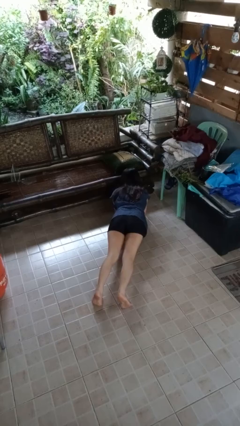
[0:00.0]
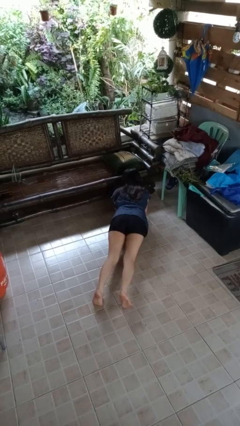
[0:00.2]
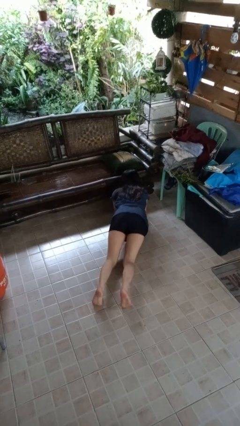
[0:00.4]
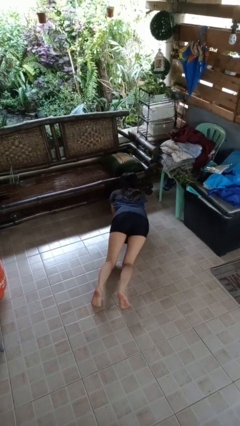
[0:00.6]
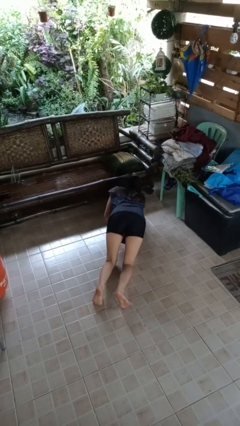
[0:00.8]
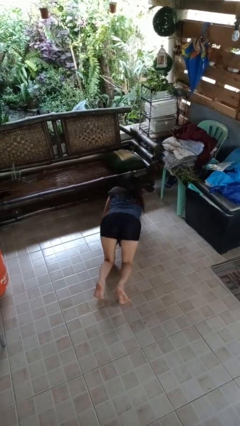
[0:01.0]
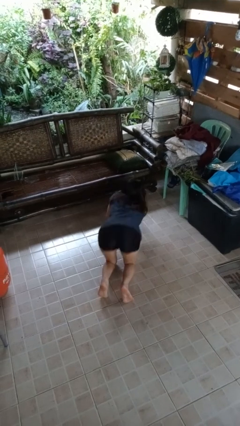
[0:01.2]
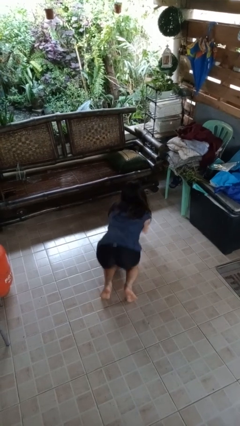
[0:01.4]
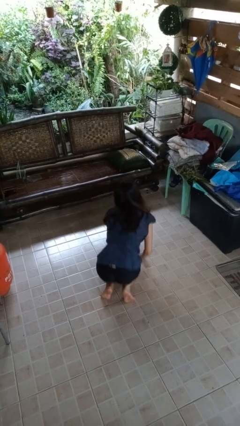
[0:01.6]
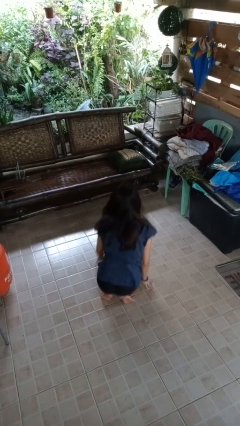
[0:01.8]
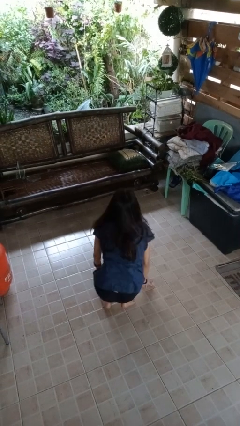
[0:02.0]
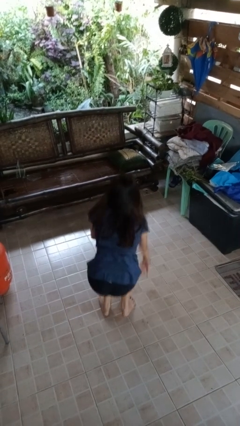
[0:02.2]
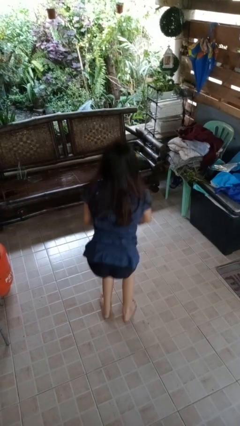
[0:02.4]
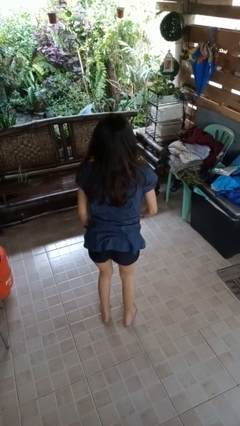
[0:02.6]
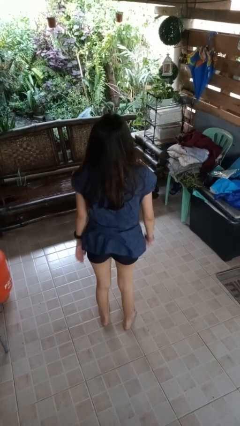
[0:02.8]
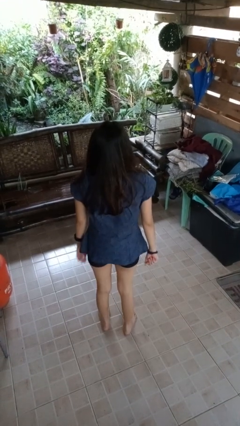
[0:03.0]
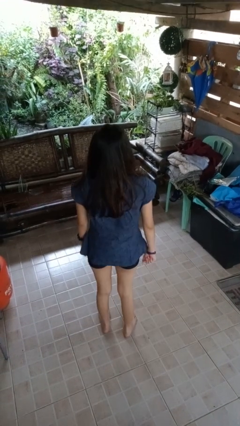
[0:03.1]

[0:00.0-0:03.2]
person stands up from floor

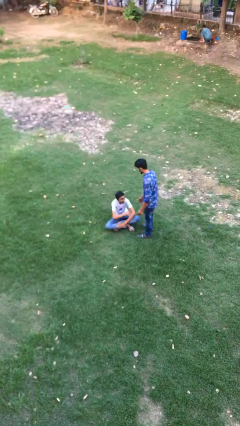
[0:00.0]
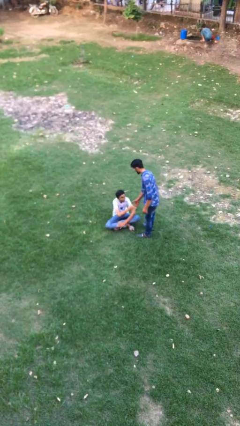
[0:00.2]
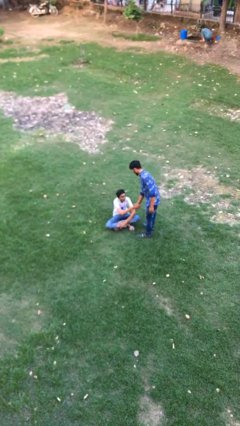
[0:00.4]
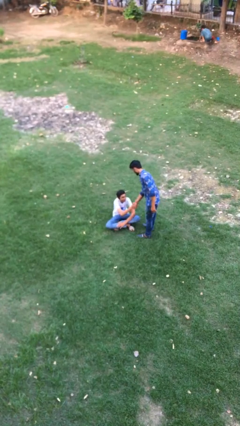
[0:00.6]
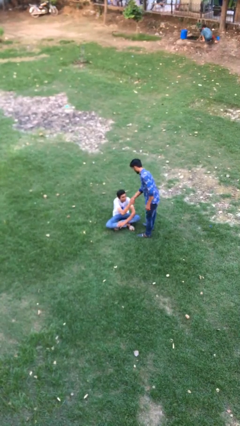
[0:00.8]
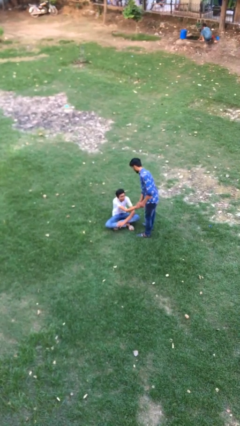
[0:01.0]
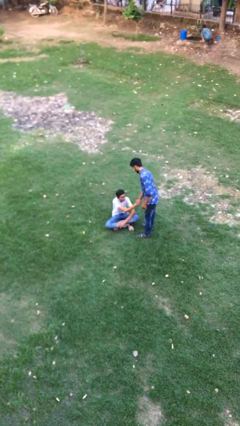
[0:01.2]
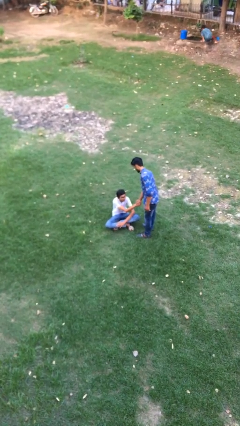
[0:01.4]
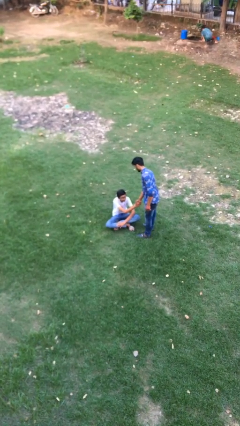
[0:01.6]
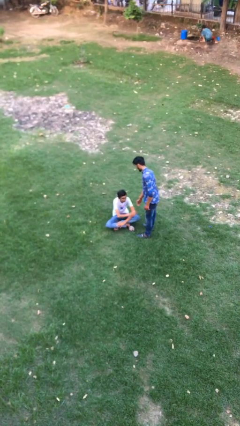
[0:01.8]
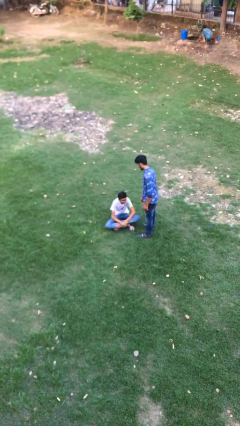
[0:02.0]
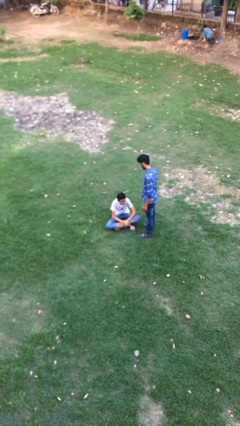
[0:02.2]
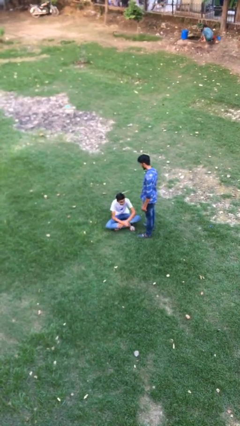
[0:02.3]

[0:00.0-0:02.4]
person shakes hand

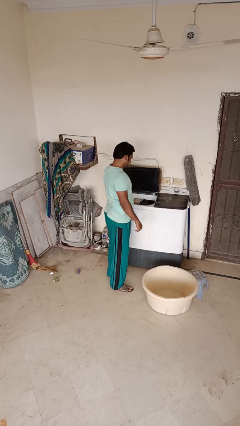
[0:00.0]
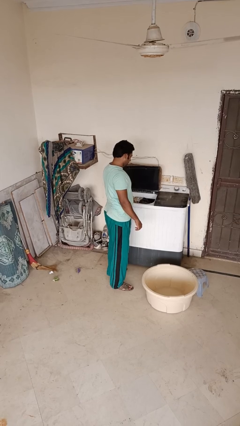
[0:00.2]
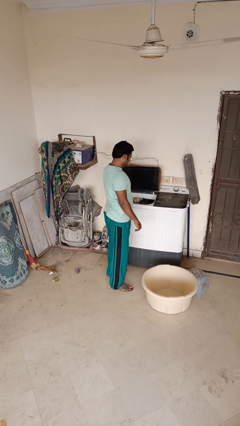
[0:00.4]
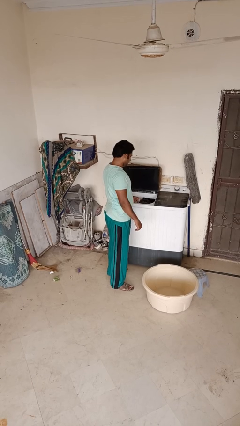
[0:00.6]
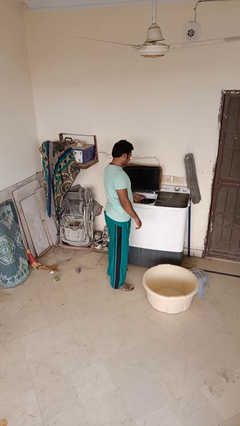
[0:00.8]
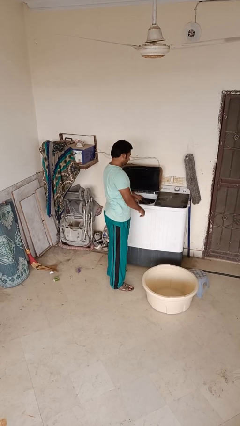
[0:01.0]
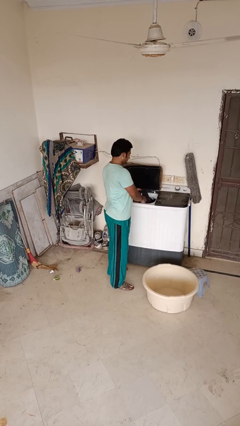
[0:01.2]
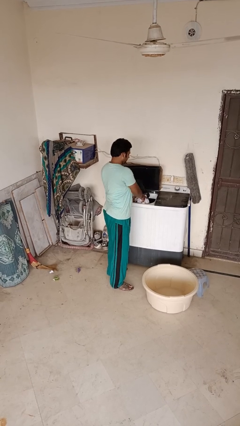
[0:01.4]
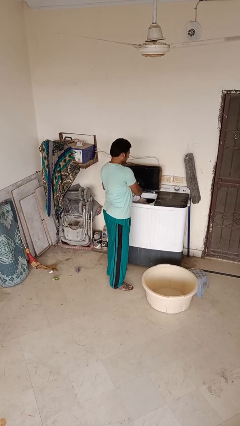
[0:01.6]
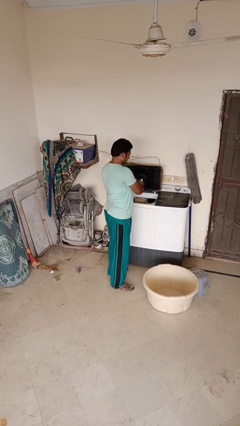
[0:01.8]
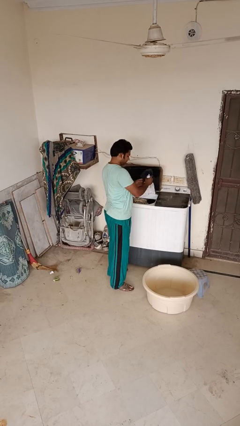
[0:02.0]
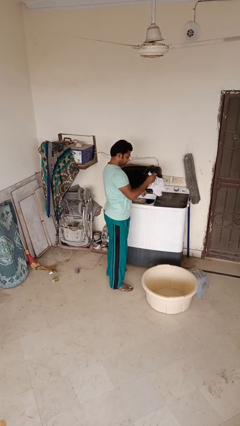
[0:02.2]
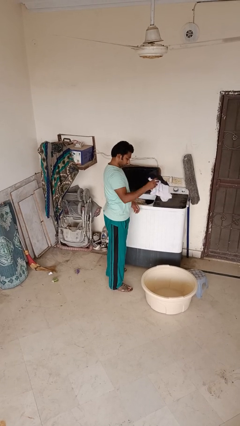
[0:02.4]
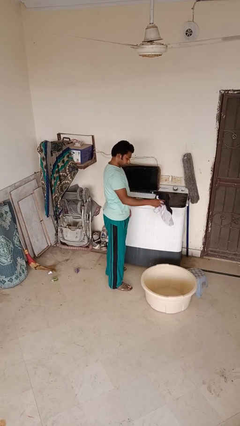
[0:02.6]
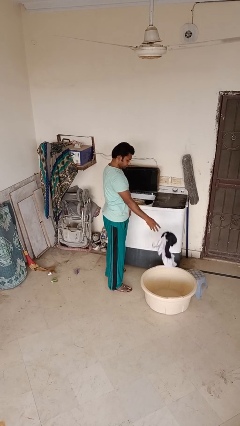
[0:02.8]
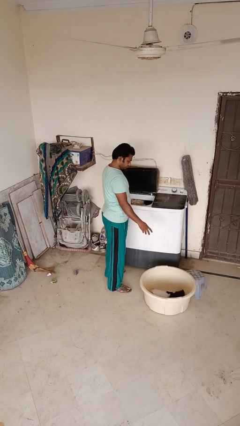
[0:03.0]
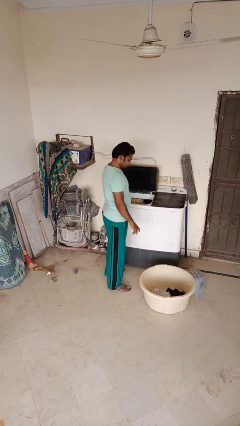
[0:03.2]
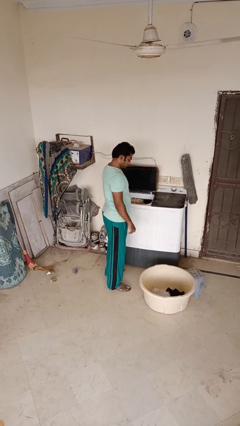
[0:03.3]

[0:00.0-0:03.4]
person loads clotheswasher

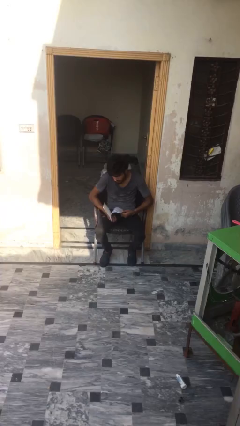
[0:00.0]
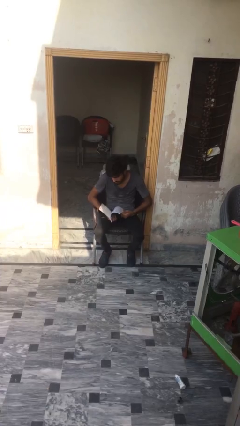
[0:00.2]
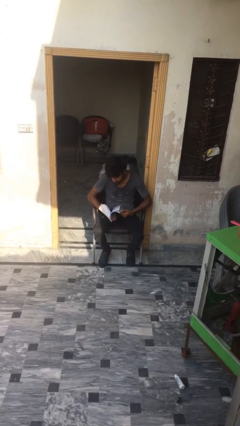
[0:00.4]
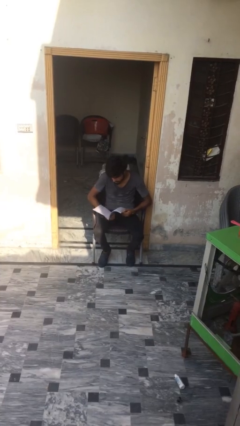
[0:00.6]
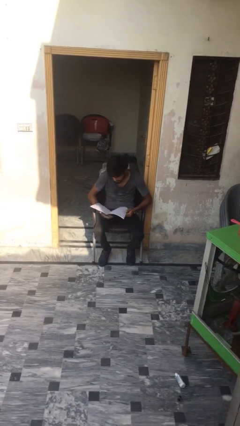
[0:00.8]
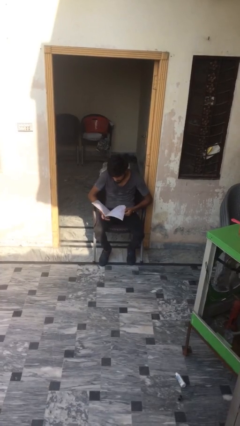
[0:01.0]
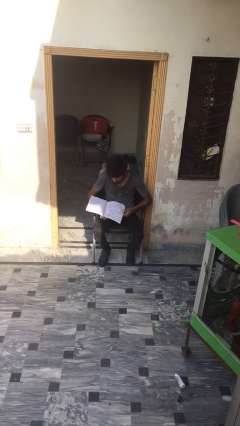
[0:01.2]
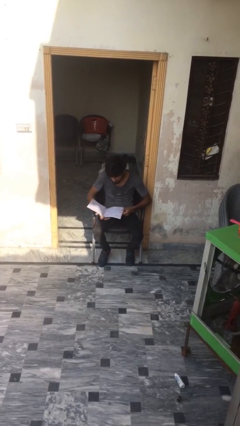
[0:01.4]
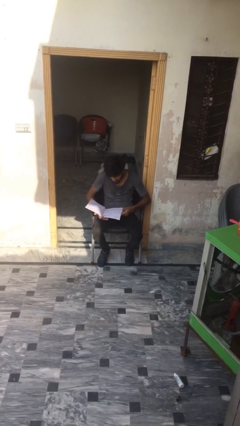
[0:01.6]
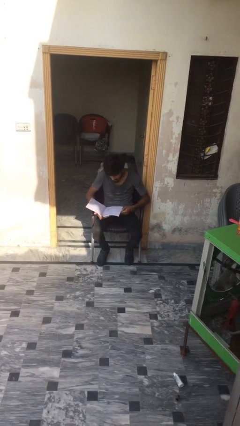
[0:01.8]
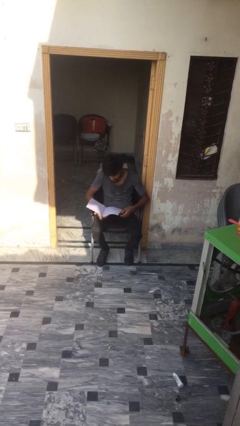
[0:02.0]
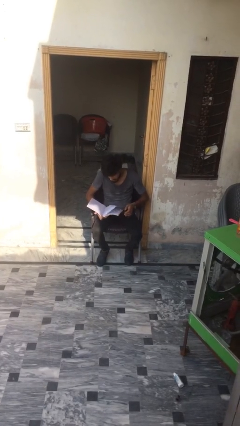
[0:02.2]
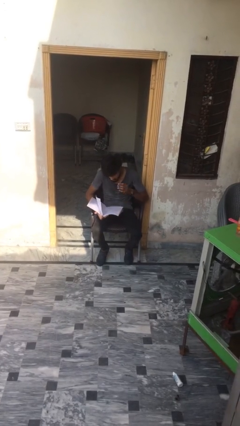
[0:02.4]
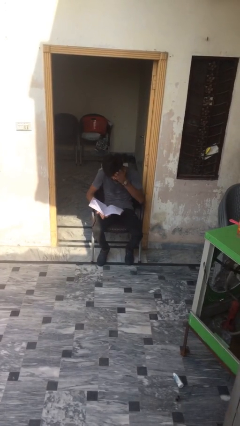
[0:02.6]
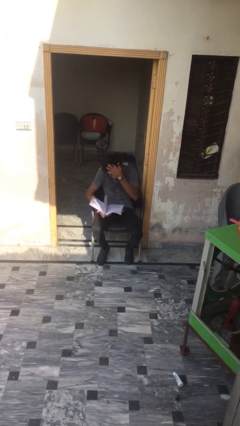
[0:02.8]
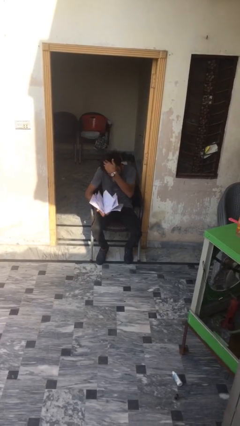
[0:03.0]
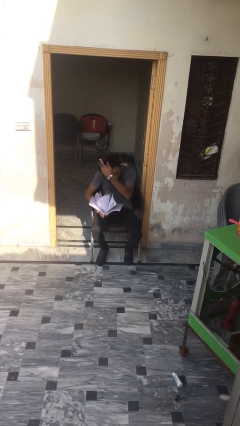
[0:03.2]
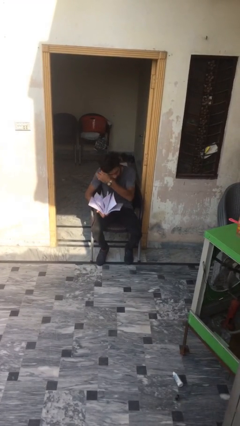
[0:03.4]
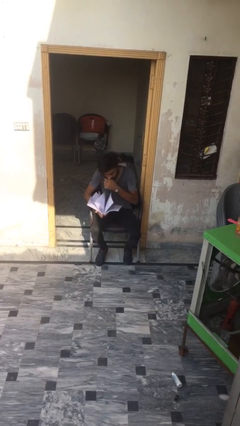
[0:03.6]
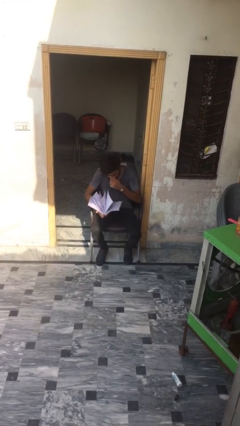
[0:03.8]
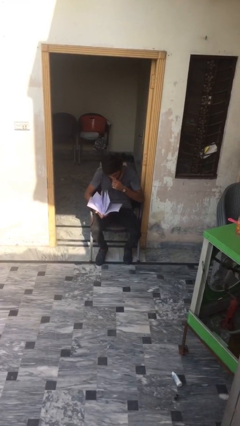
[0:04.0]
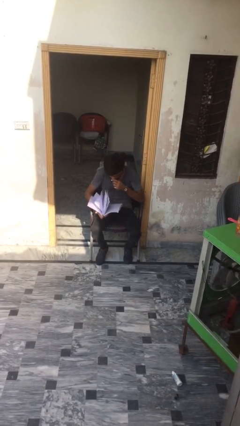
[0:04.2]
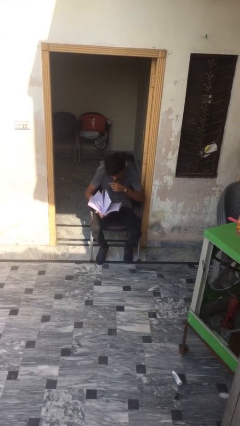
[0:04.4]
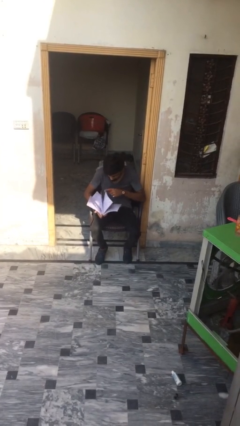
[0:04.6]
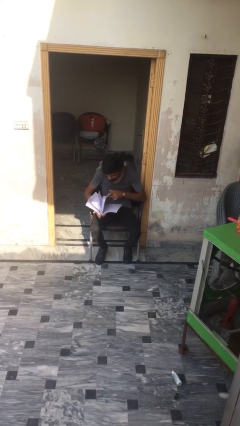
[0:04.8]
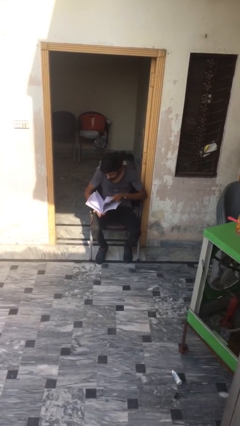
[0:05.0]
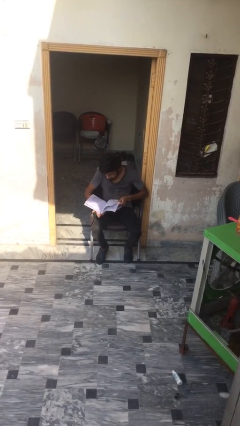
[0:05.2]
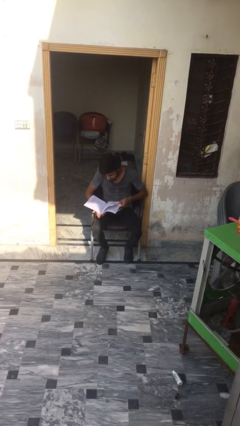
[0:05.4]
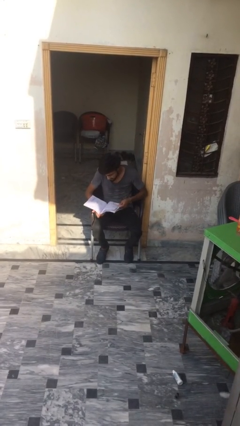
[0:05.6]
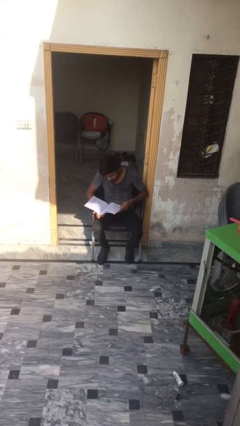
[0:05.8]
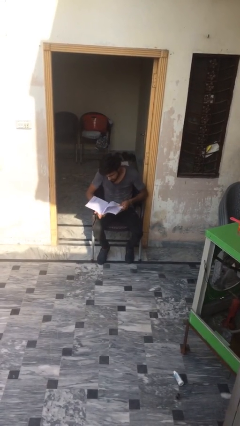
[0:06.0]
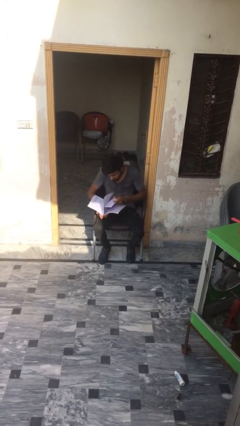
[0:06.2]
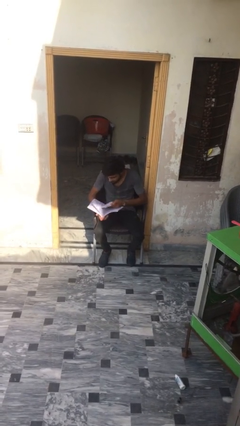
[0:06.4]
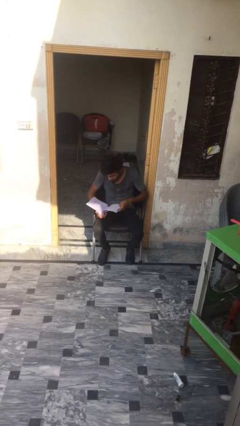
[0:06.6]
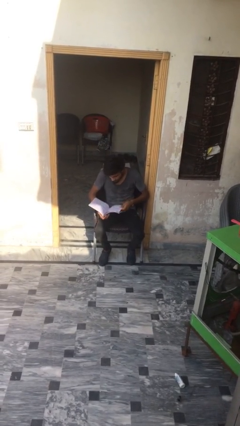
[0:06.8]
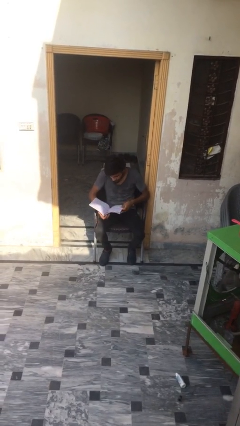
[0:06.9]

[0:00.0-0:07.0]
person reads document

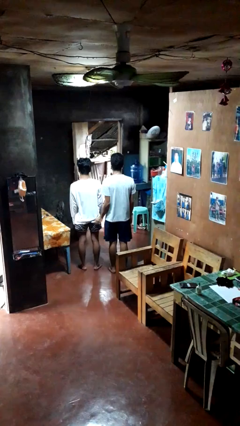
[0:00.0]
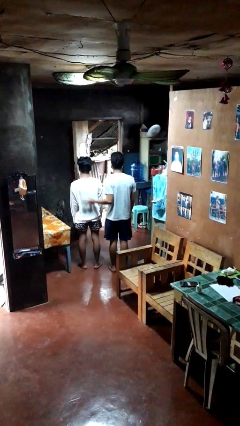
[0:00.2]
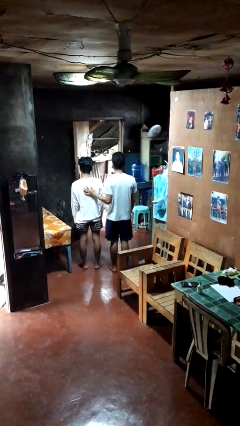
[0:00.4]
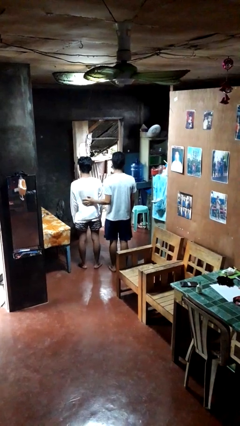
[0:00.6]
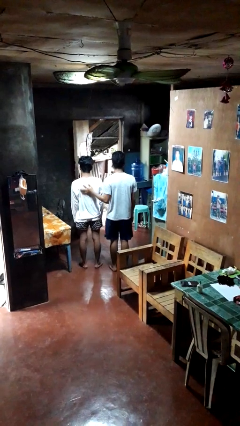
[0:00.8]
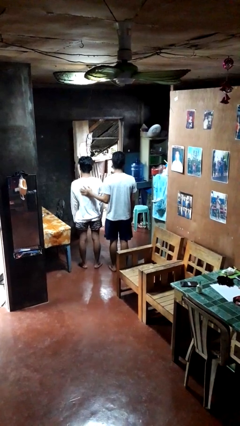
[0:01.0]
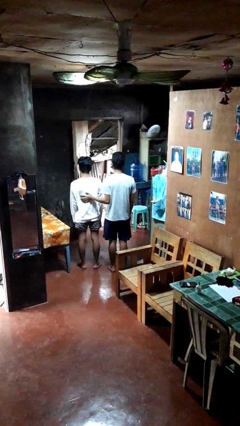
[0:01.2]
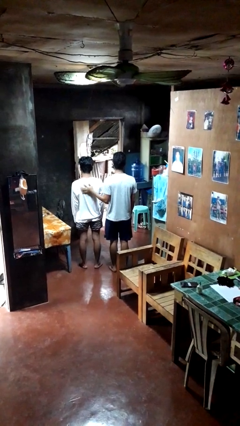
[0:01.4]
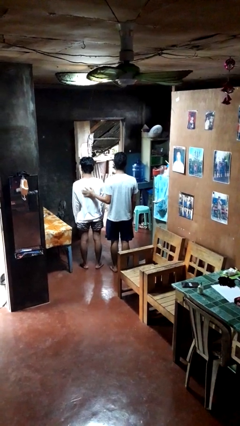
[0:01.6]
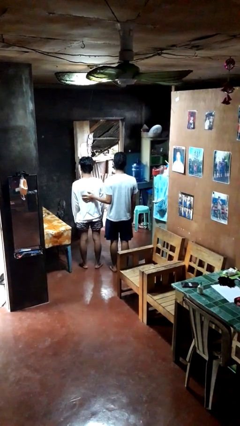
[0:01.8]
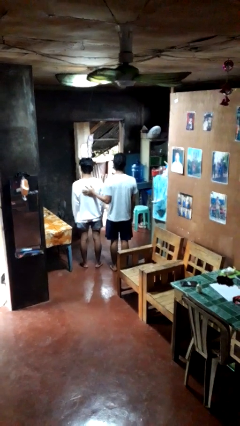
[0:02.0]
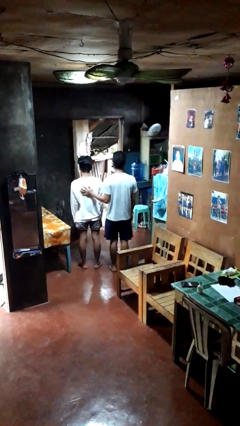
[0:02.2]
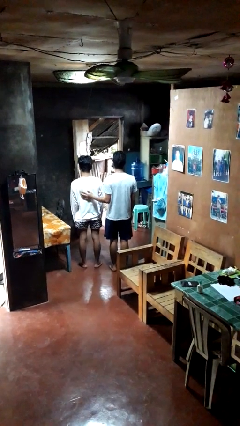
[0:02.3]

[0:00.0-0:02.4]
person touches back of person
